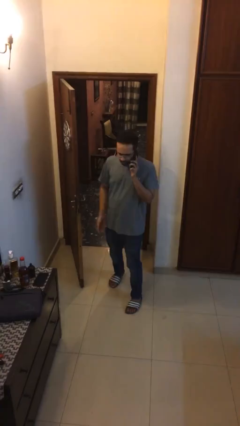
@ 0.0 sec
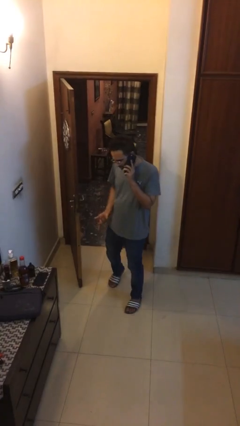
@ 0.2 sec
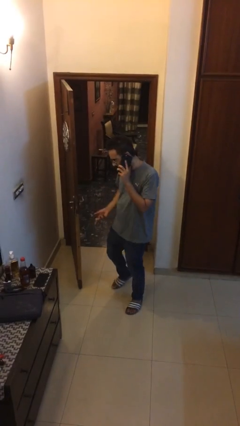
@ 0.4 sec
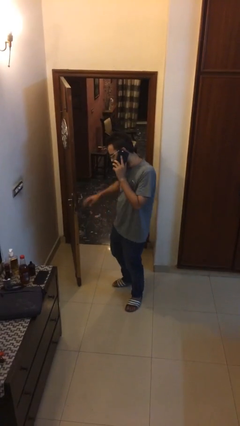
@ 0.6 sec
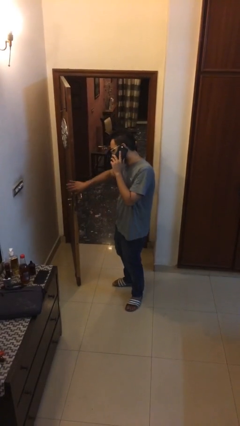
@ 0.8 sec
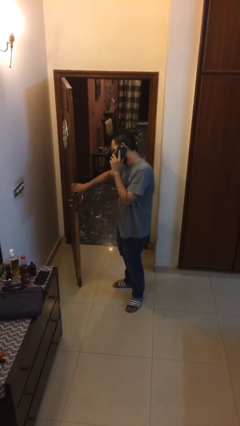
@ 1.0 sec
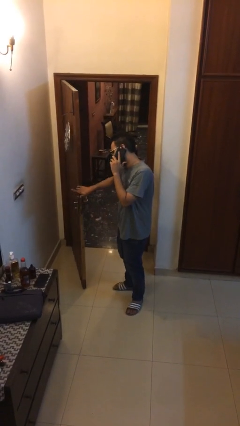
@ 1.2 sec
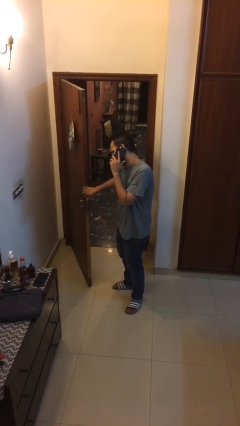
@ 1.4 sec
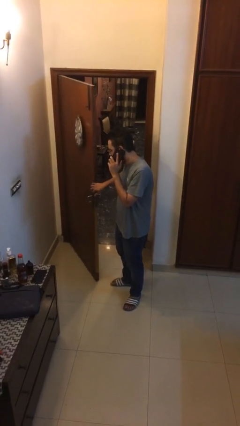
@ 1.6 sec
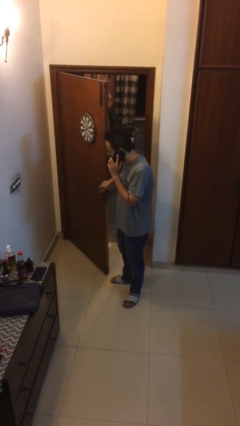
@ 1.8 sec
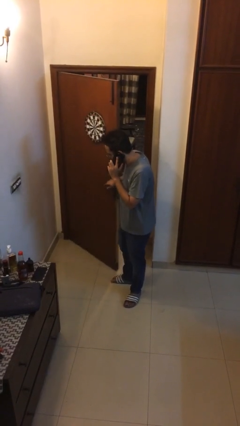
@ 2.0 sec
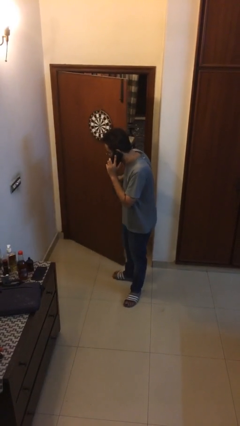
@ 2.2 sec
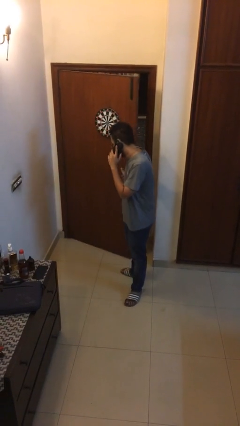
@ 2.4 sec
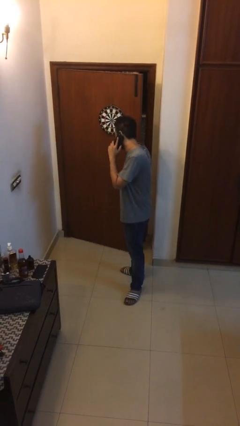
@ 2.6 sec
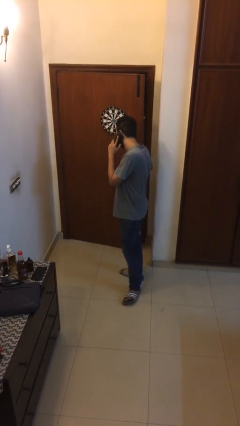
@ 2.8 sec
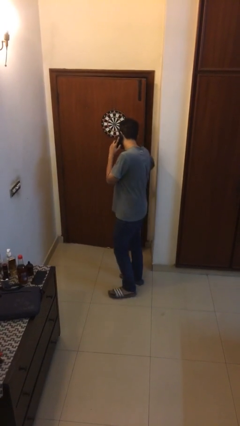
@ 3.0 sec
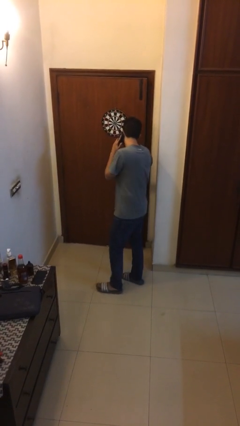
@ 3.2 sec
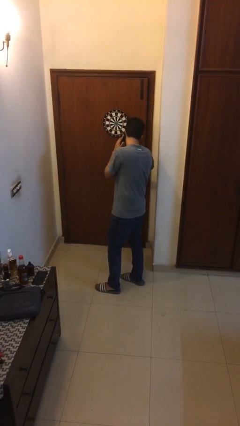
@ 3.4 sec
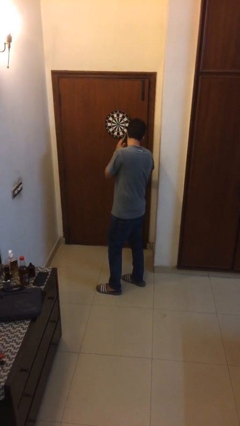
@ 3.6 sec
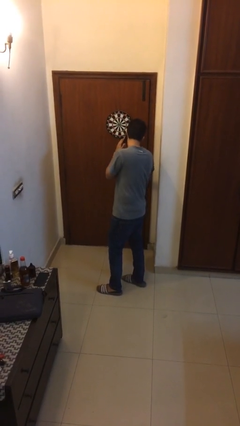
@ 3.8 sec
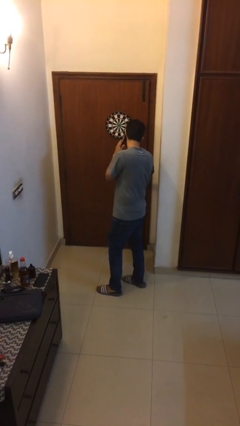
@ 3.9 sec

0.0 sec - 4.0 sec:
person closes facility door

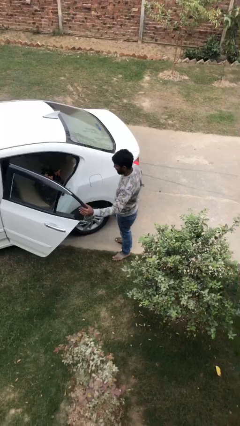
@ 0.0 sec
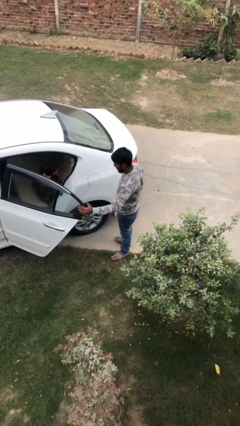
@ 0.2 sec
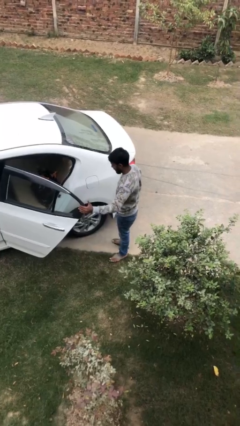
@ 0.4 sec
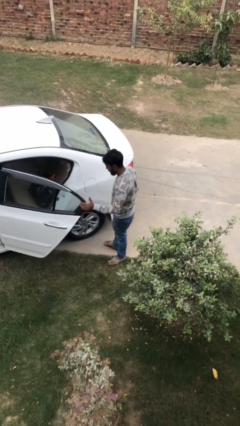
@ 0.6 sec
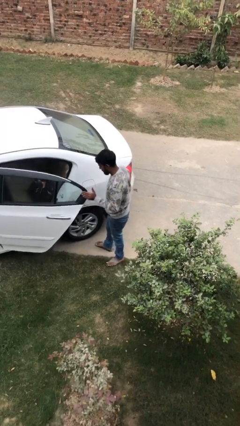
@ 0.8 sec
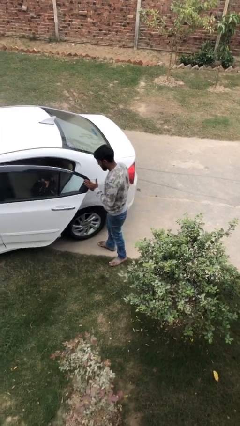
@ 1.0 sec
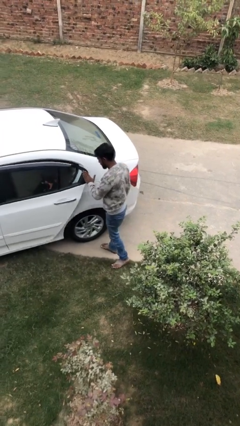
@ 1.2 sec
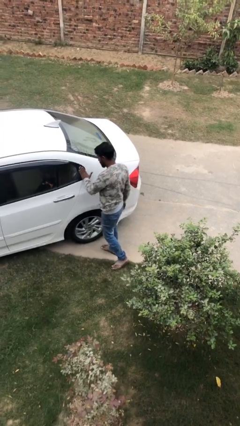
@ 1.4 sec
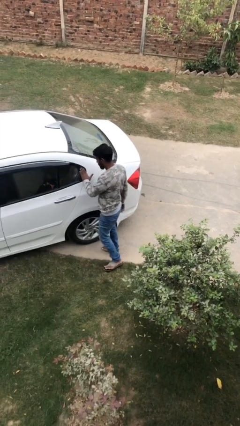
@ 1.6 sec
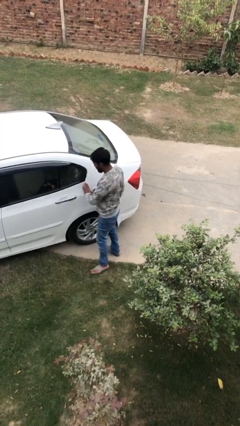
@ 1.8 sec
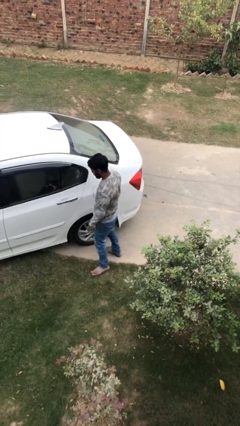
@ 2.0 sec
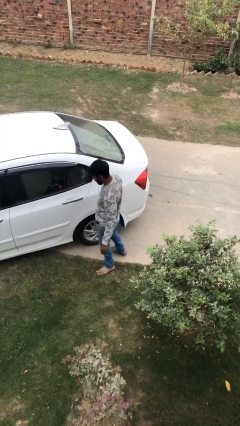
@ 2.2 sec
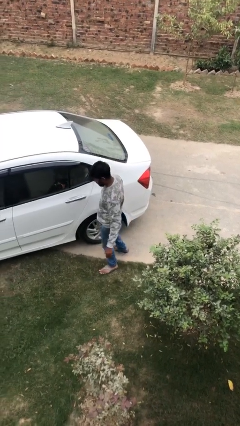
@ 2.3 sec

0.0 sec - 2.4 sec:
person closes car door

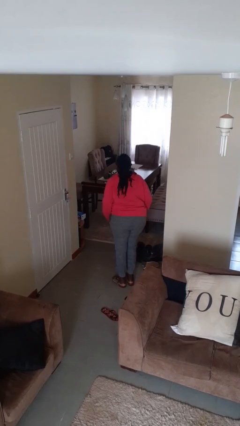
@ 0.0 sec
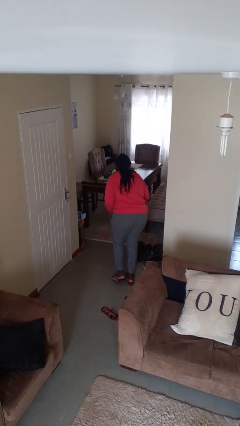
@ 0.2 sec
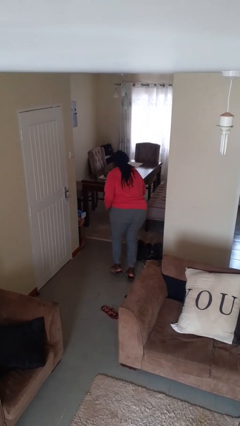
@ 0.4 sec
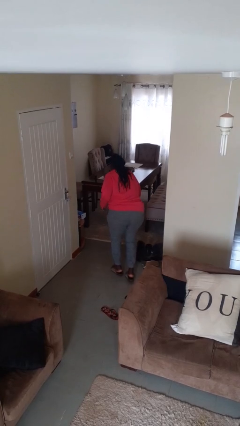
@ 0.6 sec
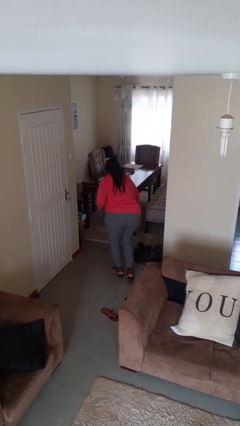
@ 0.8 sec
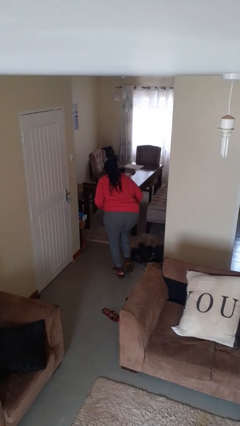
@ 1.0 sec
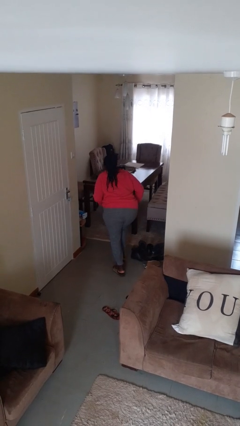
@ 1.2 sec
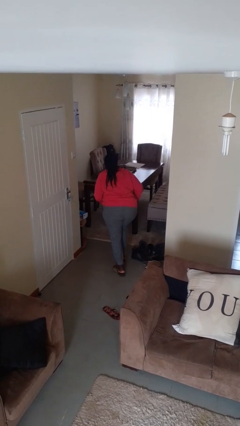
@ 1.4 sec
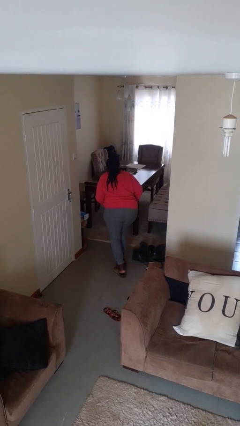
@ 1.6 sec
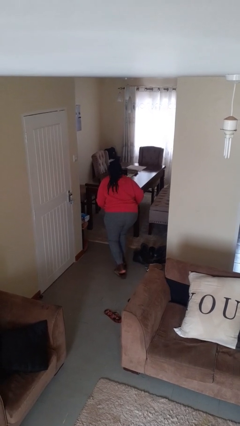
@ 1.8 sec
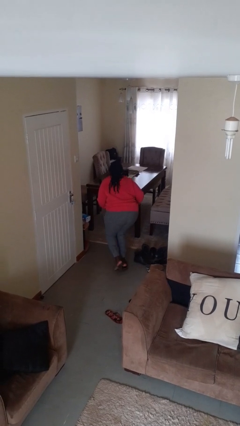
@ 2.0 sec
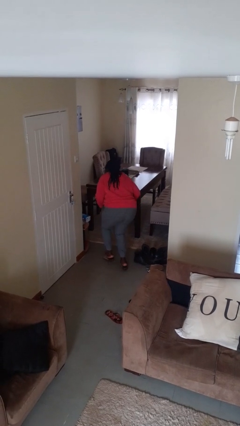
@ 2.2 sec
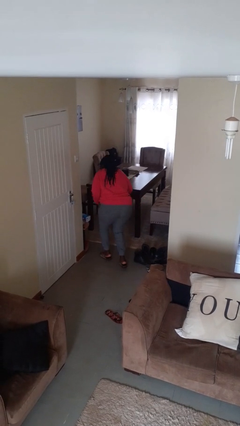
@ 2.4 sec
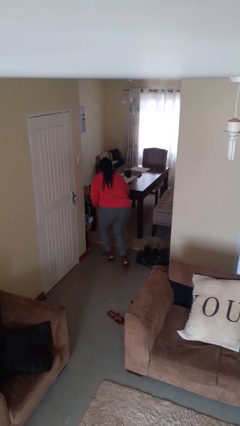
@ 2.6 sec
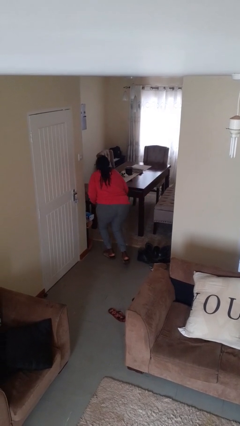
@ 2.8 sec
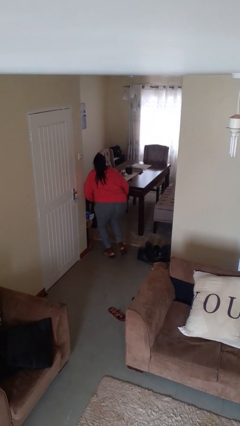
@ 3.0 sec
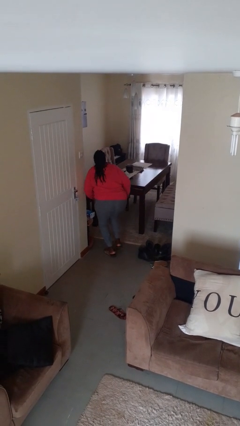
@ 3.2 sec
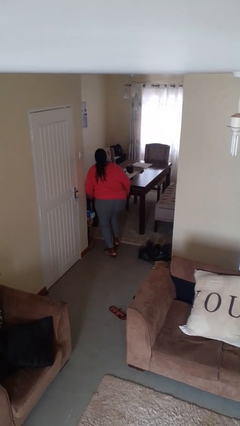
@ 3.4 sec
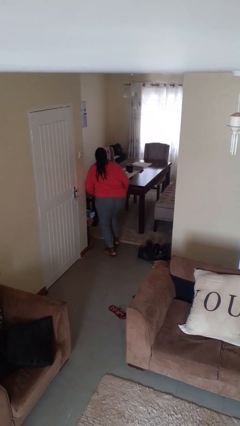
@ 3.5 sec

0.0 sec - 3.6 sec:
person walks tiptoe

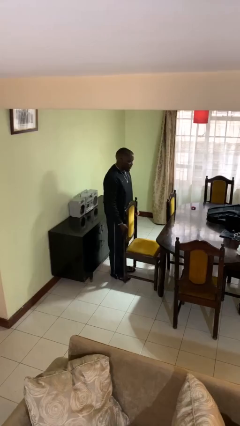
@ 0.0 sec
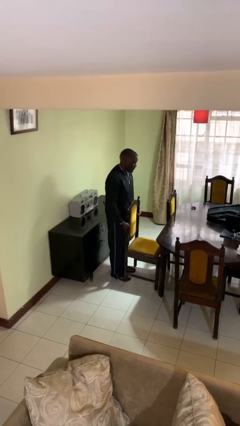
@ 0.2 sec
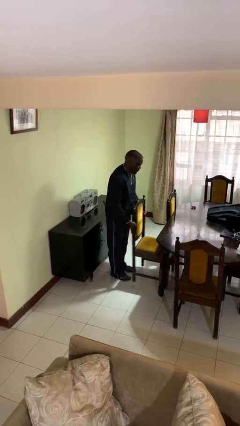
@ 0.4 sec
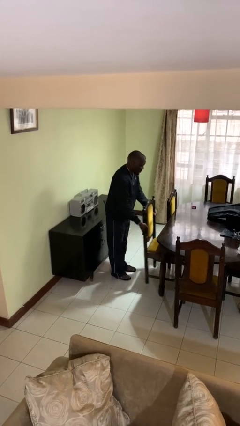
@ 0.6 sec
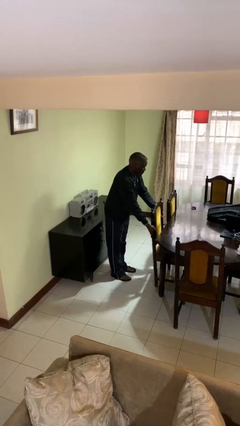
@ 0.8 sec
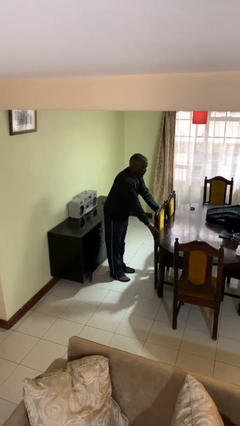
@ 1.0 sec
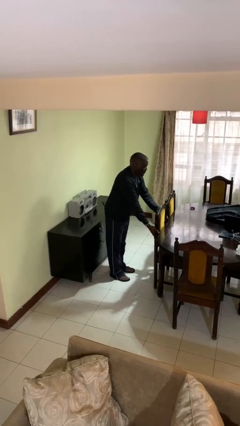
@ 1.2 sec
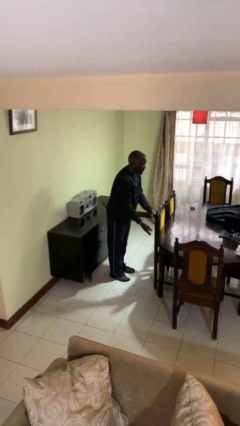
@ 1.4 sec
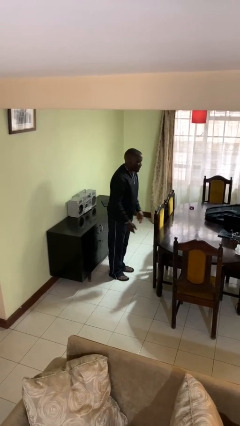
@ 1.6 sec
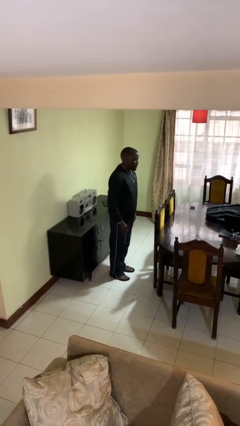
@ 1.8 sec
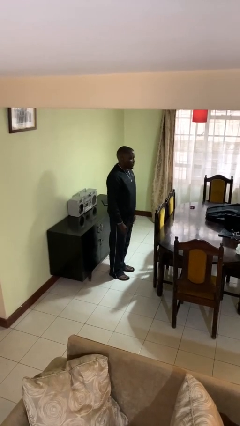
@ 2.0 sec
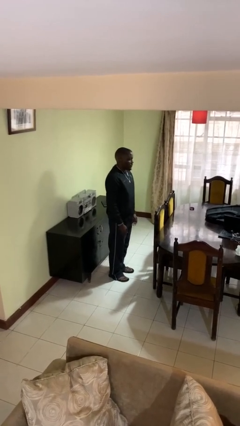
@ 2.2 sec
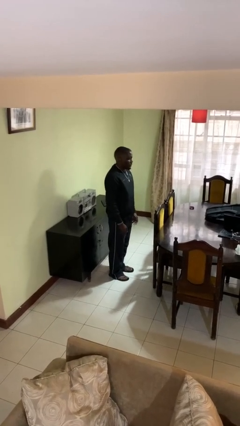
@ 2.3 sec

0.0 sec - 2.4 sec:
person pushes in chair

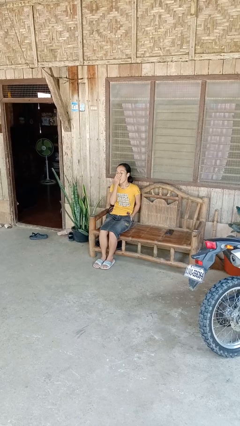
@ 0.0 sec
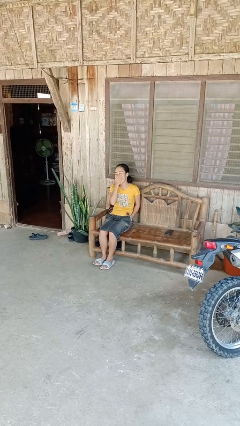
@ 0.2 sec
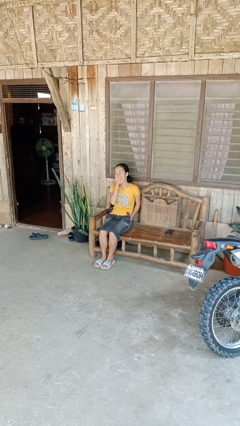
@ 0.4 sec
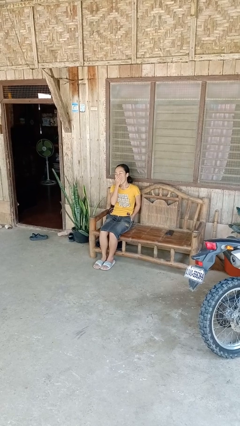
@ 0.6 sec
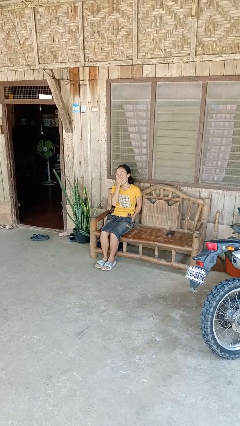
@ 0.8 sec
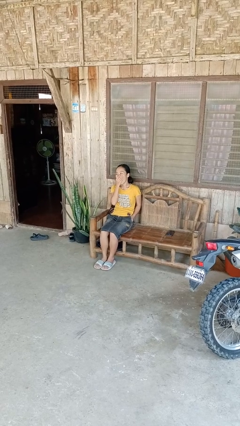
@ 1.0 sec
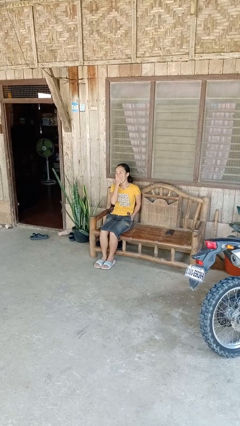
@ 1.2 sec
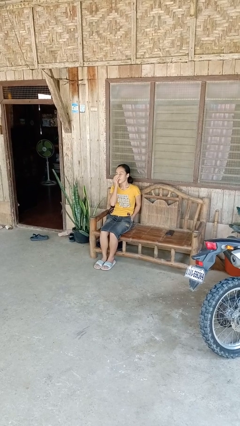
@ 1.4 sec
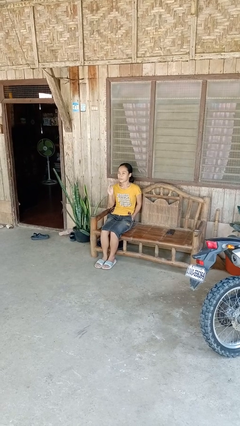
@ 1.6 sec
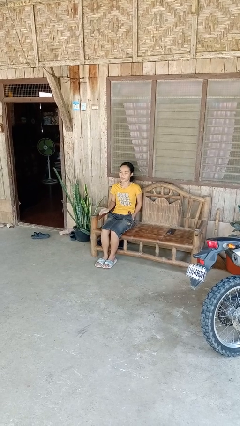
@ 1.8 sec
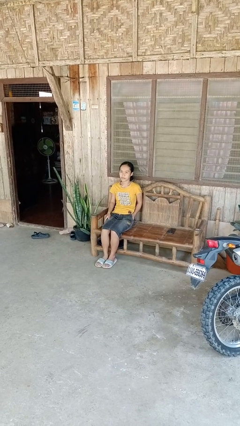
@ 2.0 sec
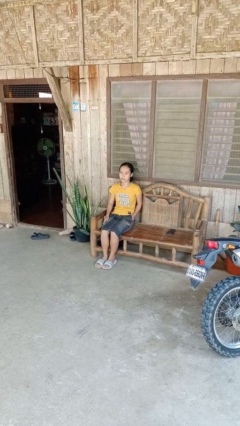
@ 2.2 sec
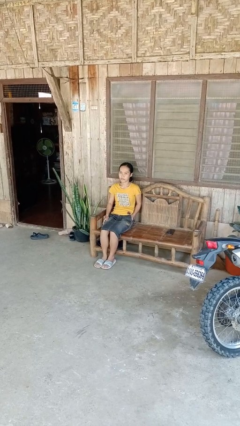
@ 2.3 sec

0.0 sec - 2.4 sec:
person yawns

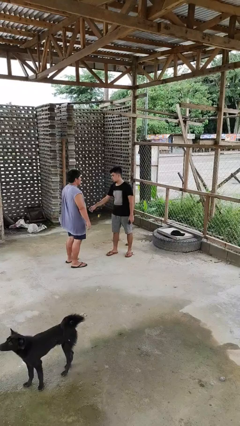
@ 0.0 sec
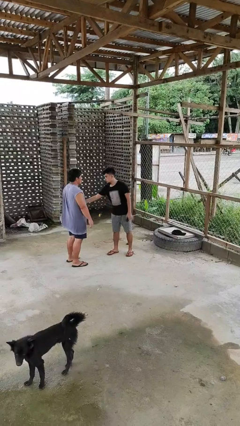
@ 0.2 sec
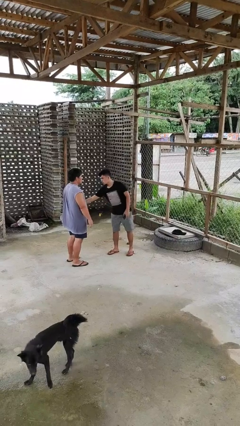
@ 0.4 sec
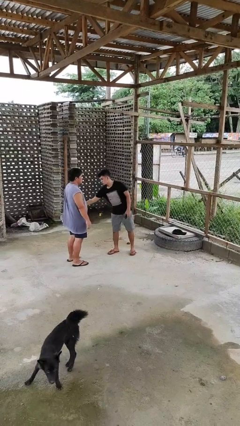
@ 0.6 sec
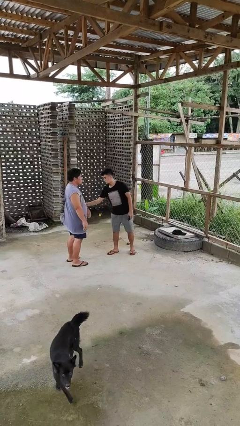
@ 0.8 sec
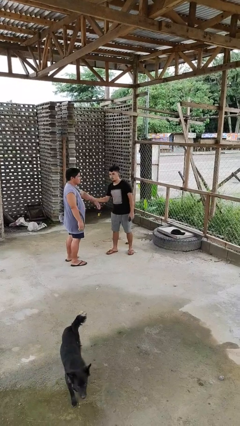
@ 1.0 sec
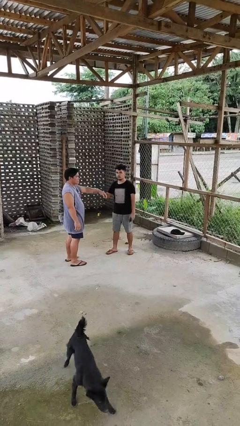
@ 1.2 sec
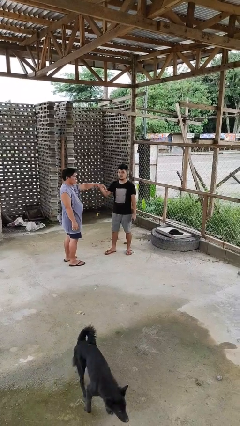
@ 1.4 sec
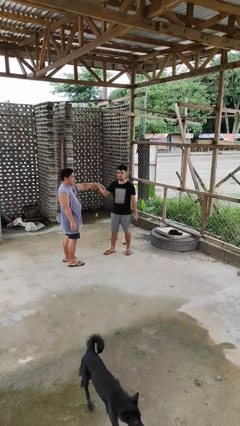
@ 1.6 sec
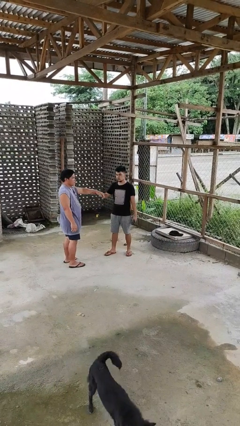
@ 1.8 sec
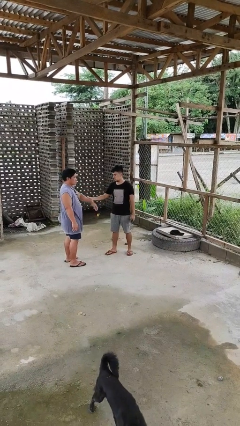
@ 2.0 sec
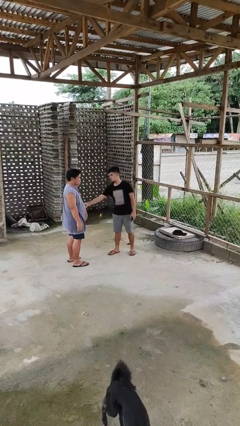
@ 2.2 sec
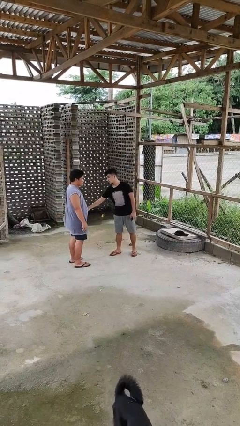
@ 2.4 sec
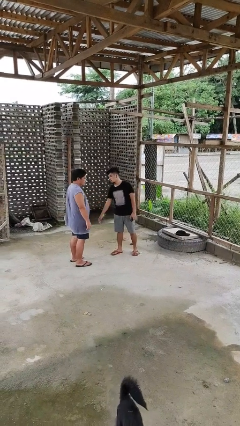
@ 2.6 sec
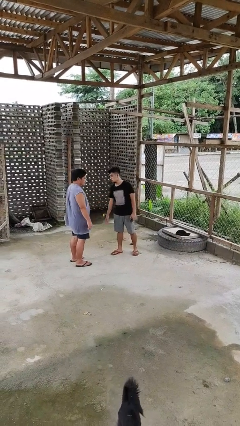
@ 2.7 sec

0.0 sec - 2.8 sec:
person grabs person by forearm
